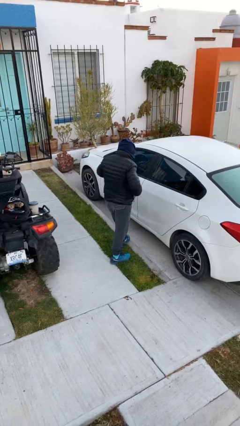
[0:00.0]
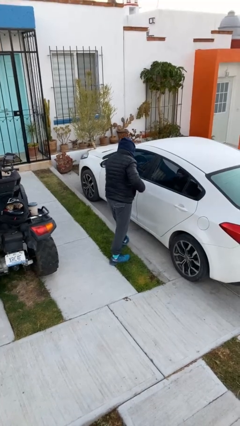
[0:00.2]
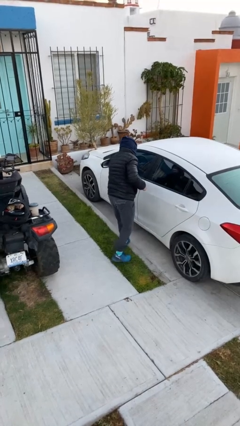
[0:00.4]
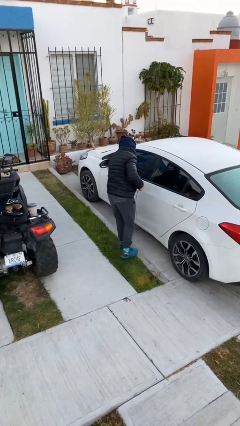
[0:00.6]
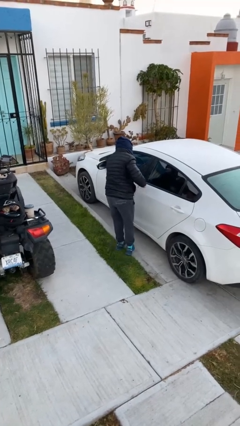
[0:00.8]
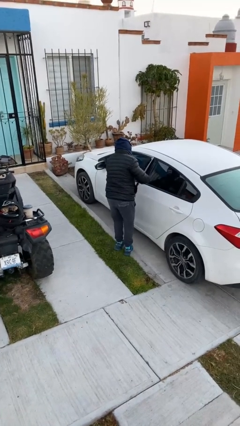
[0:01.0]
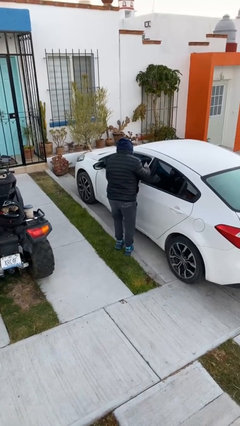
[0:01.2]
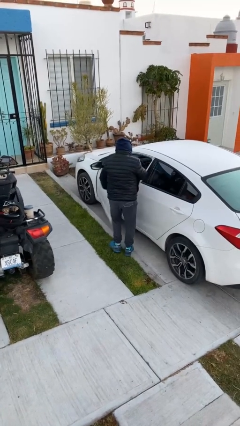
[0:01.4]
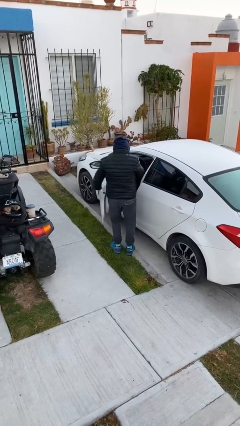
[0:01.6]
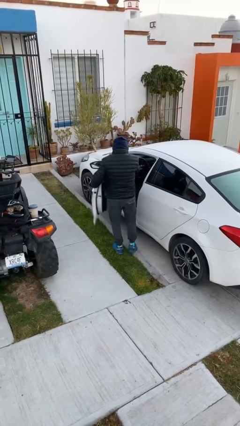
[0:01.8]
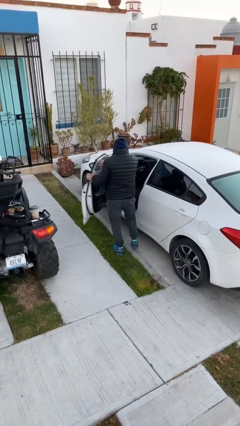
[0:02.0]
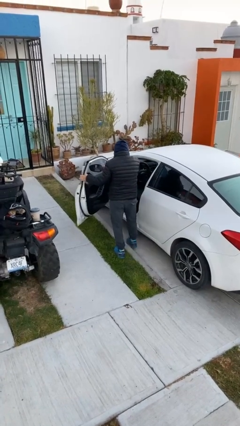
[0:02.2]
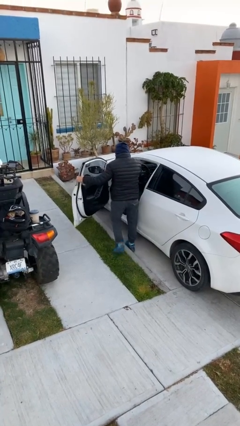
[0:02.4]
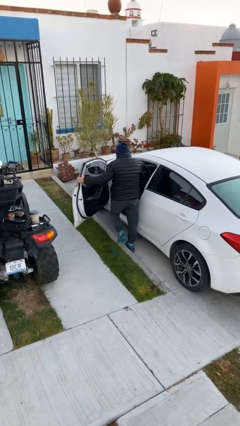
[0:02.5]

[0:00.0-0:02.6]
person opens car door

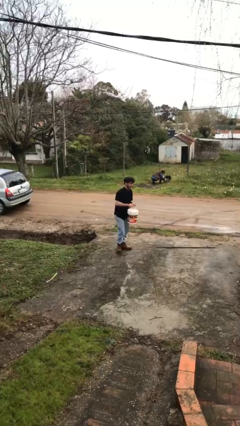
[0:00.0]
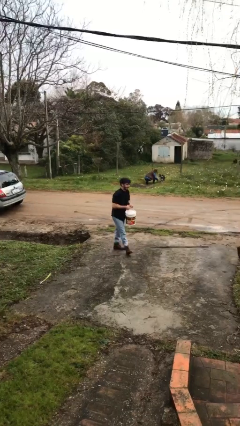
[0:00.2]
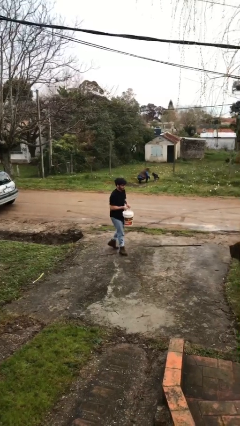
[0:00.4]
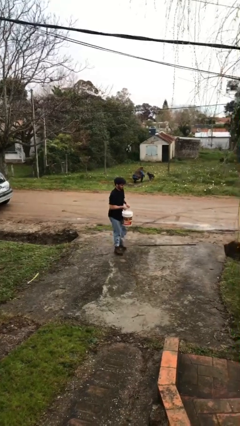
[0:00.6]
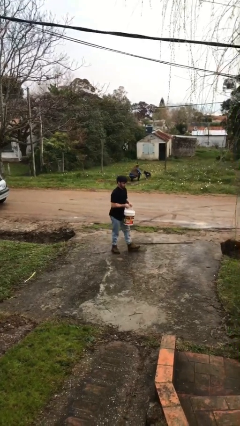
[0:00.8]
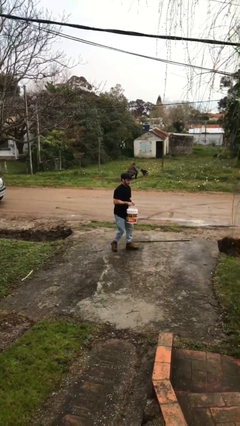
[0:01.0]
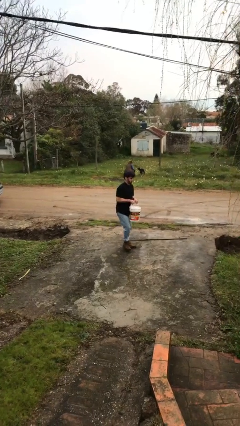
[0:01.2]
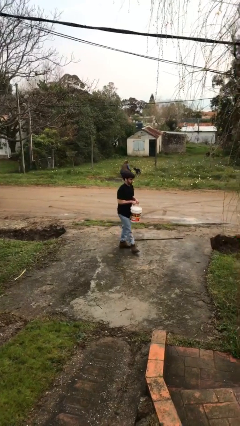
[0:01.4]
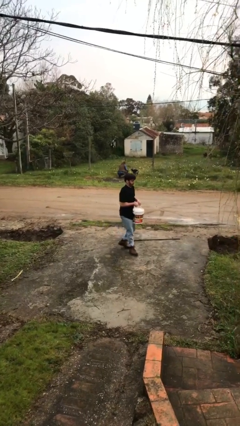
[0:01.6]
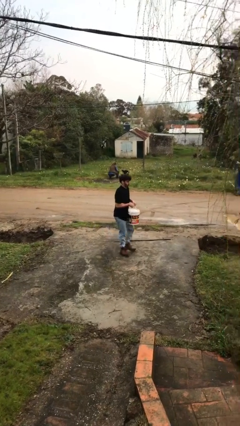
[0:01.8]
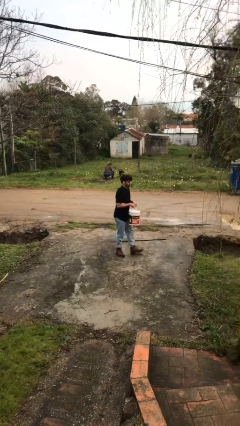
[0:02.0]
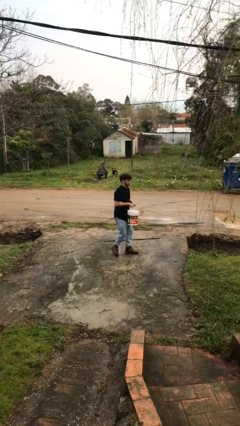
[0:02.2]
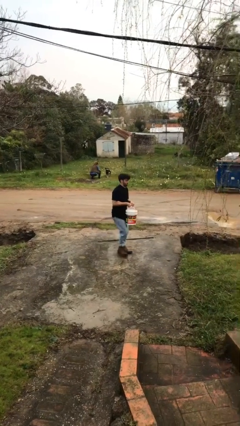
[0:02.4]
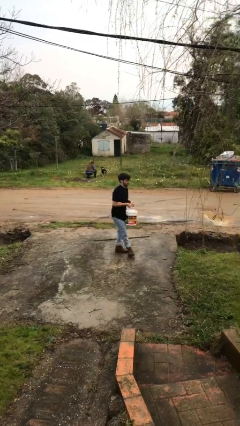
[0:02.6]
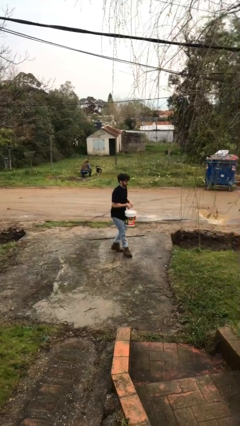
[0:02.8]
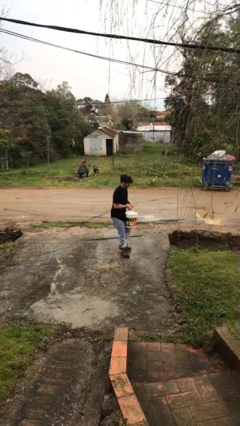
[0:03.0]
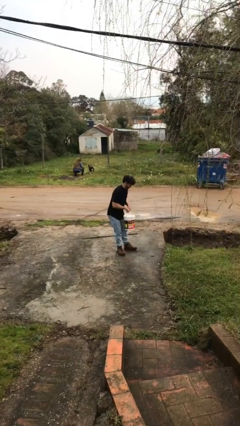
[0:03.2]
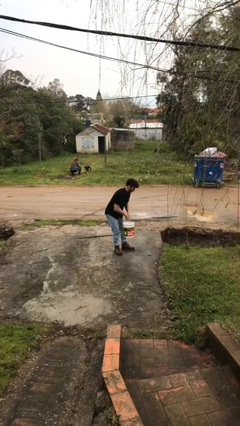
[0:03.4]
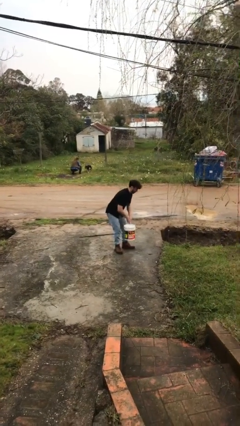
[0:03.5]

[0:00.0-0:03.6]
person carries heavy object

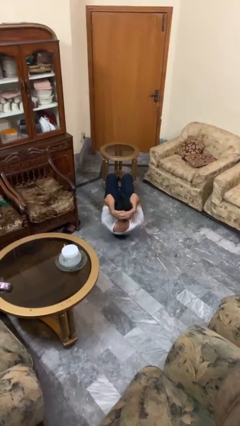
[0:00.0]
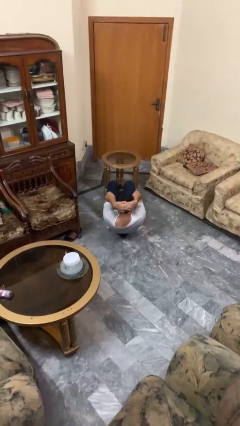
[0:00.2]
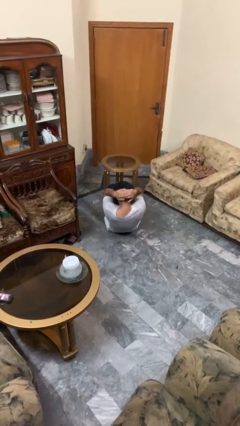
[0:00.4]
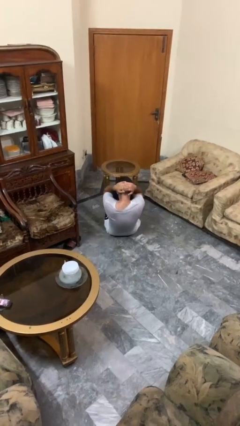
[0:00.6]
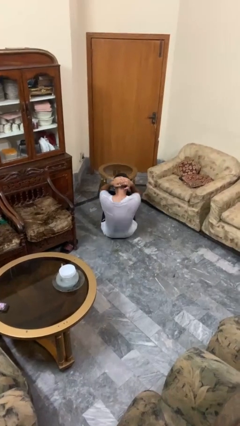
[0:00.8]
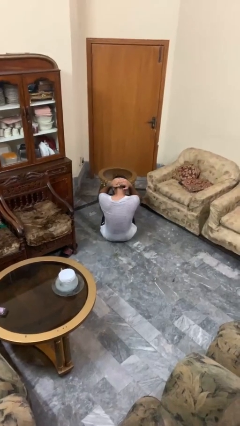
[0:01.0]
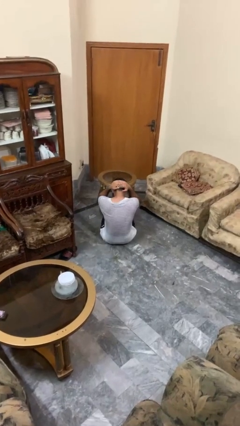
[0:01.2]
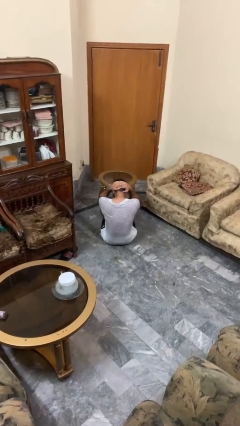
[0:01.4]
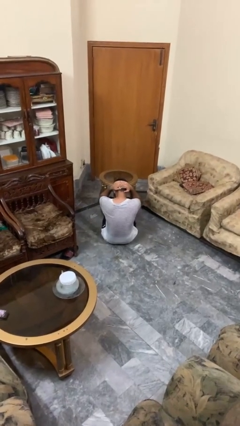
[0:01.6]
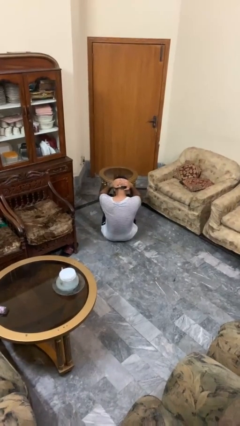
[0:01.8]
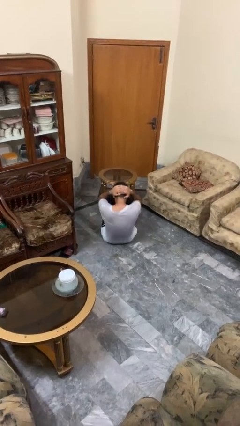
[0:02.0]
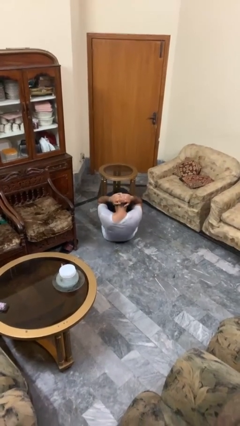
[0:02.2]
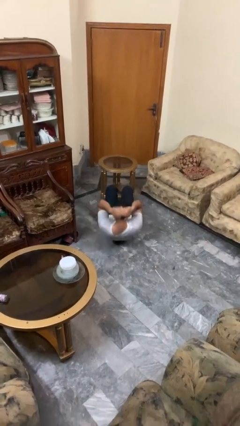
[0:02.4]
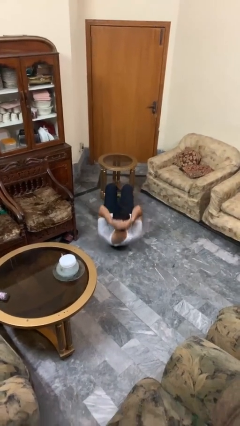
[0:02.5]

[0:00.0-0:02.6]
person exercises with situp

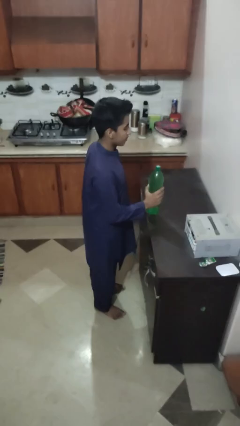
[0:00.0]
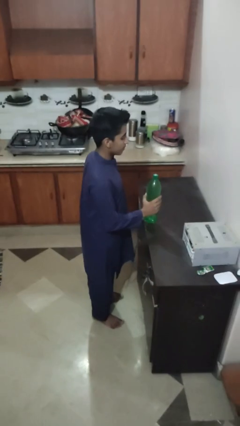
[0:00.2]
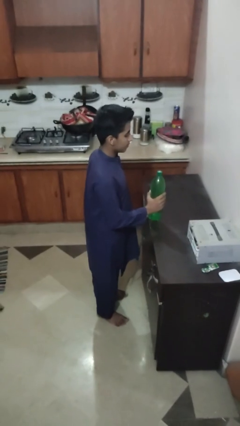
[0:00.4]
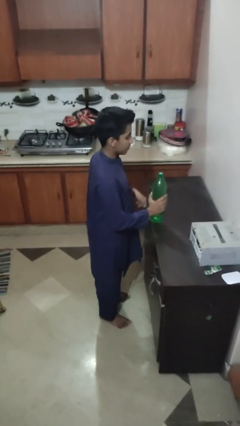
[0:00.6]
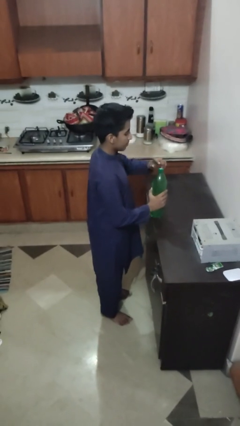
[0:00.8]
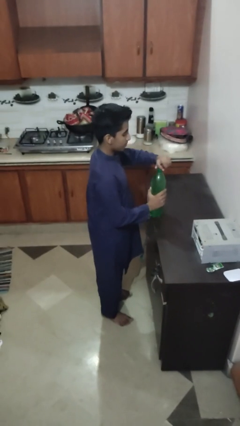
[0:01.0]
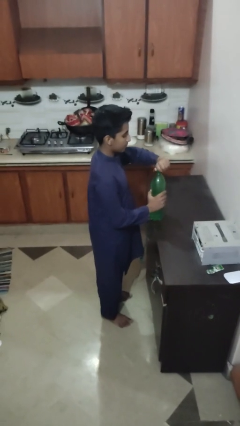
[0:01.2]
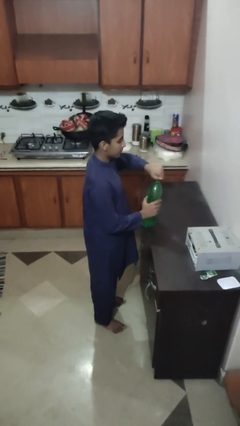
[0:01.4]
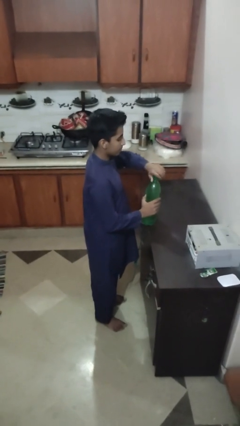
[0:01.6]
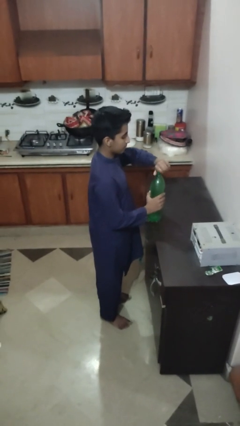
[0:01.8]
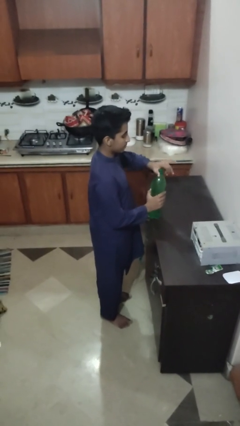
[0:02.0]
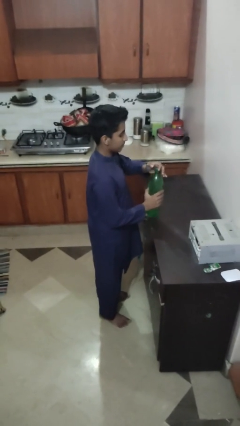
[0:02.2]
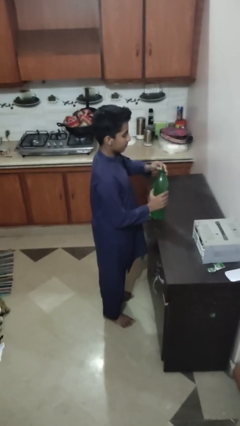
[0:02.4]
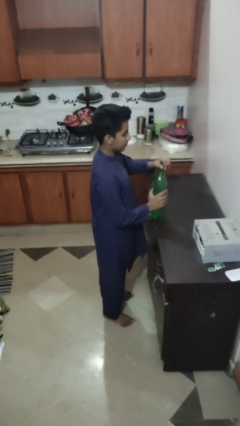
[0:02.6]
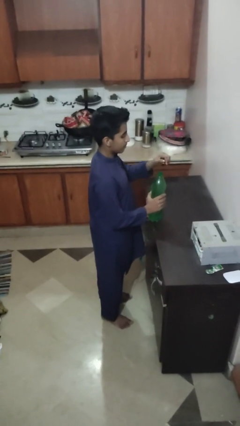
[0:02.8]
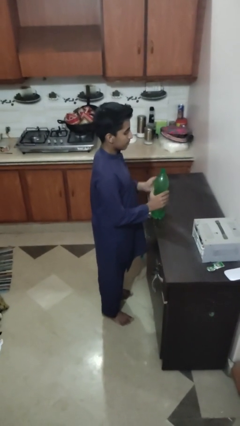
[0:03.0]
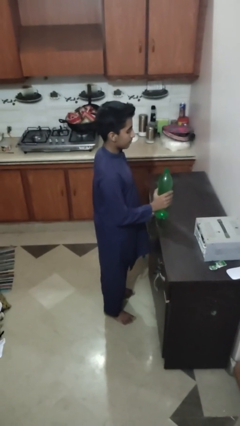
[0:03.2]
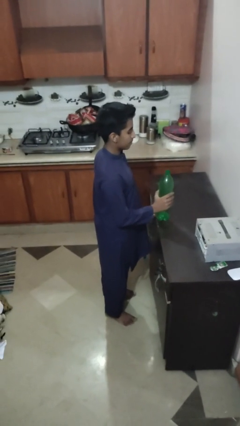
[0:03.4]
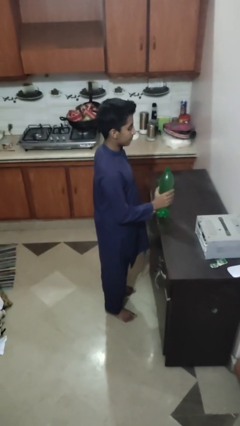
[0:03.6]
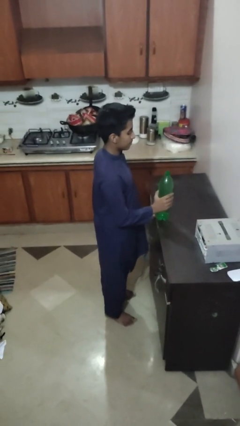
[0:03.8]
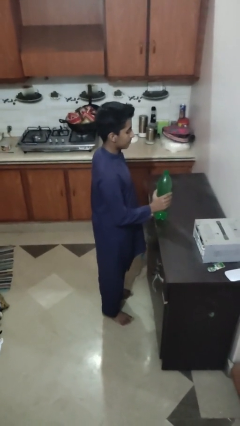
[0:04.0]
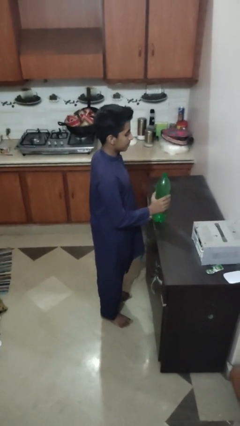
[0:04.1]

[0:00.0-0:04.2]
person unscrews lid from bottle

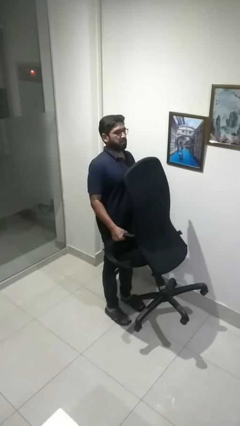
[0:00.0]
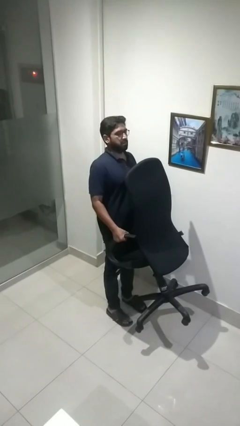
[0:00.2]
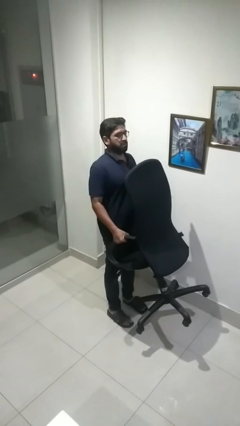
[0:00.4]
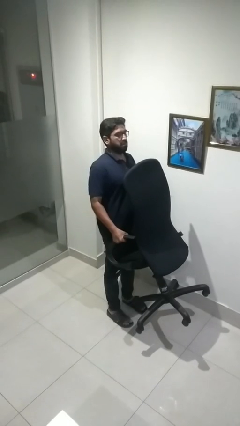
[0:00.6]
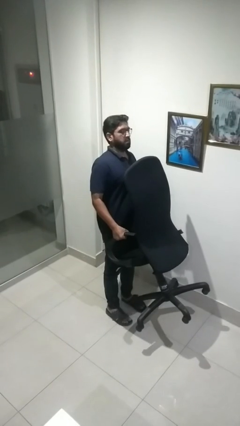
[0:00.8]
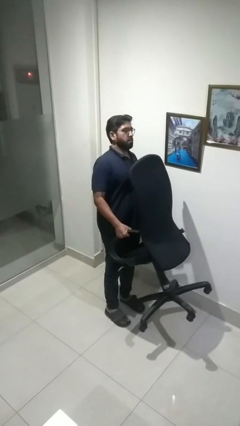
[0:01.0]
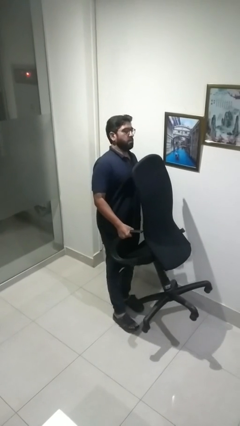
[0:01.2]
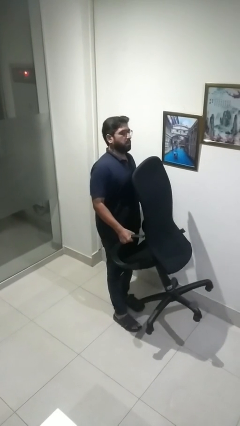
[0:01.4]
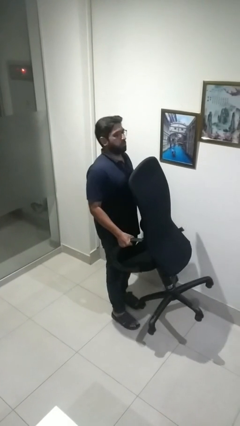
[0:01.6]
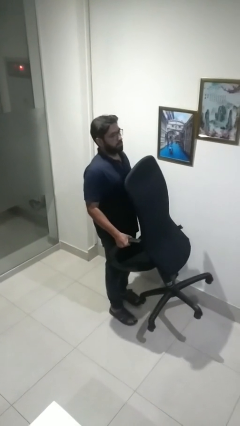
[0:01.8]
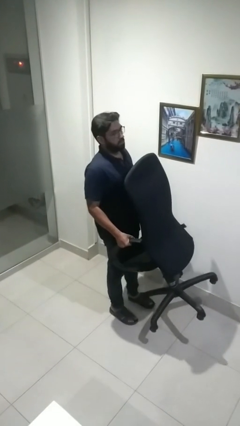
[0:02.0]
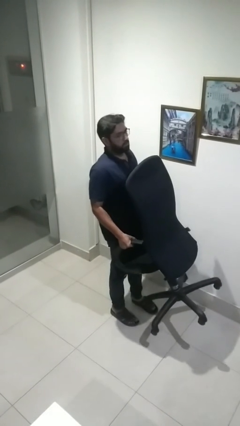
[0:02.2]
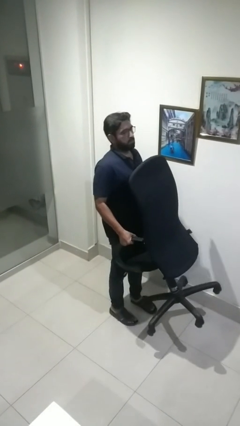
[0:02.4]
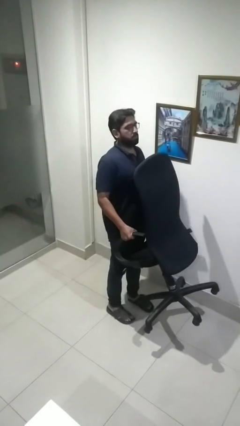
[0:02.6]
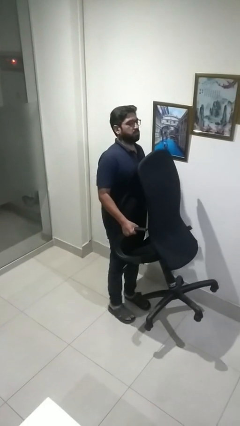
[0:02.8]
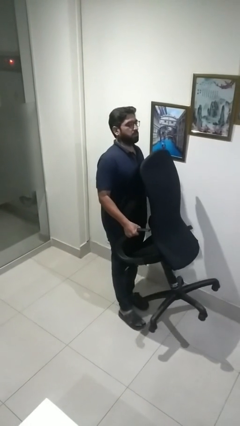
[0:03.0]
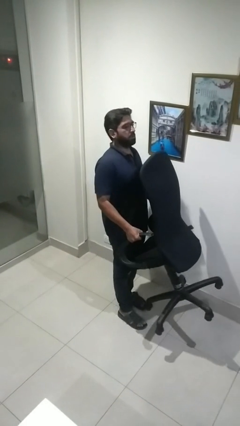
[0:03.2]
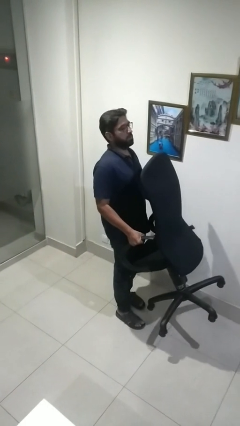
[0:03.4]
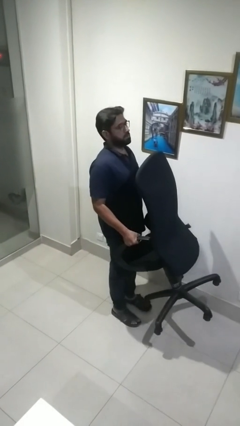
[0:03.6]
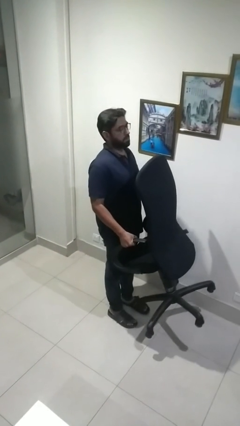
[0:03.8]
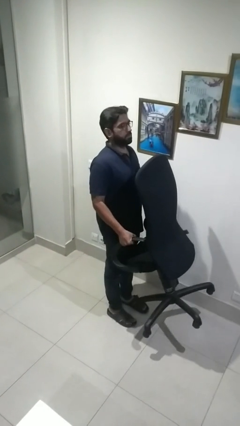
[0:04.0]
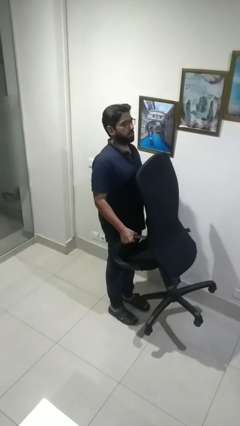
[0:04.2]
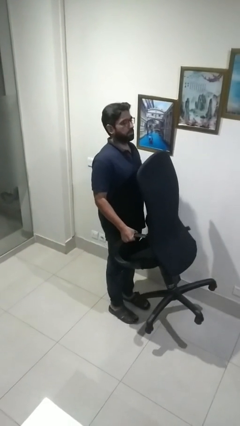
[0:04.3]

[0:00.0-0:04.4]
person carries furniture

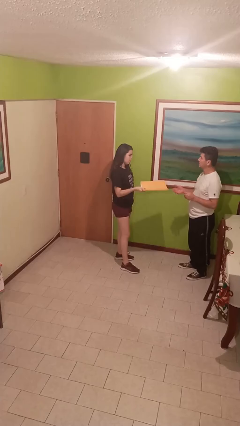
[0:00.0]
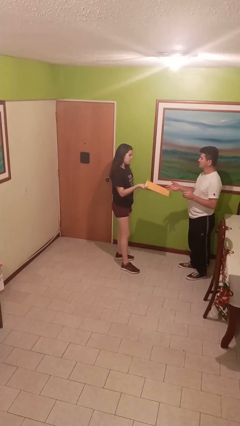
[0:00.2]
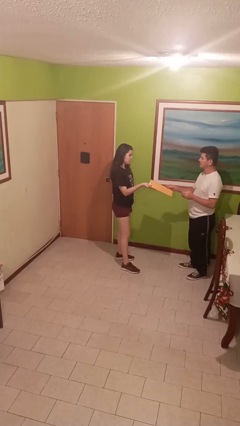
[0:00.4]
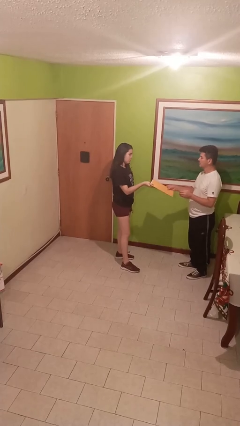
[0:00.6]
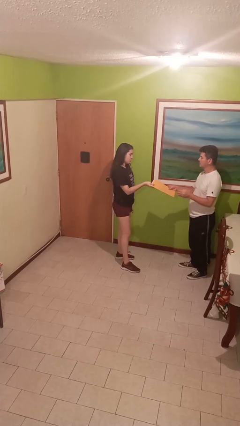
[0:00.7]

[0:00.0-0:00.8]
person transfers object to person
